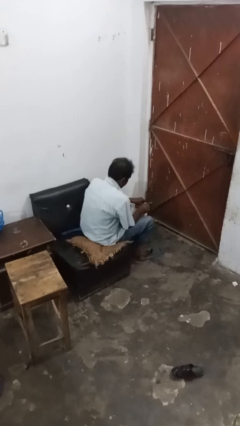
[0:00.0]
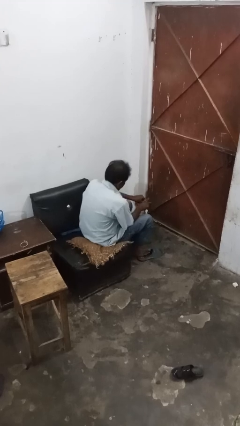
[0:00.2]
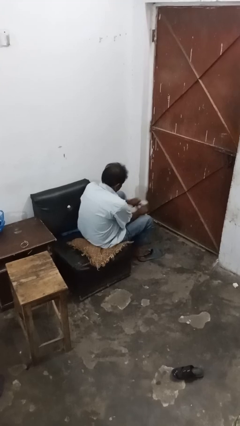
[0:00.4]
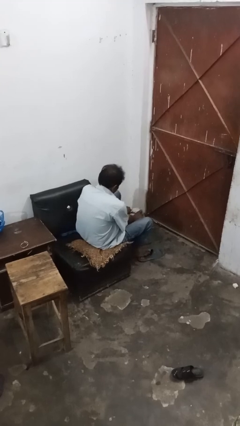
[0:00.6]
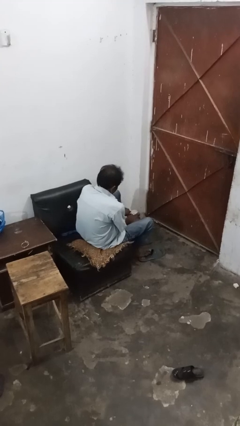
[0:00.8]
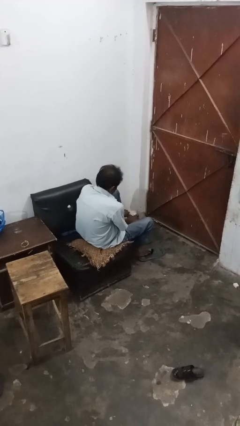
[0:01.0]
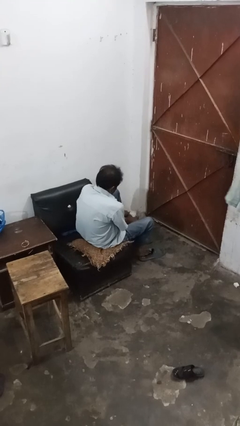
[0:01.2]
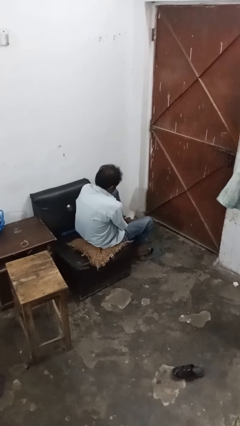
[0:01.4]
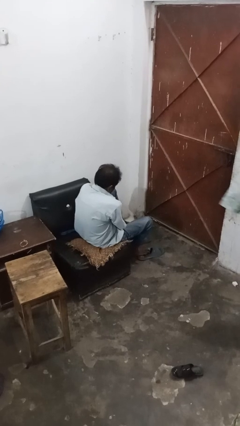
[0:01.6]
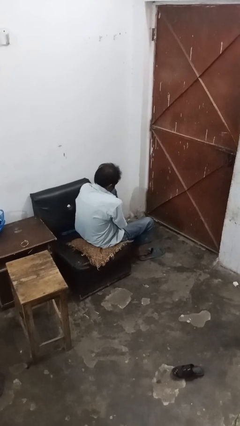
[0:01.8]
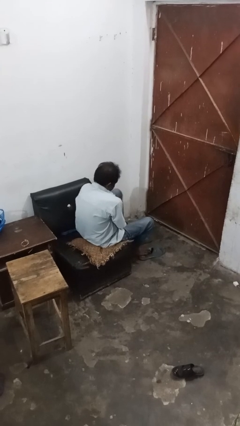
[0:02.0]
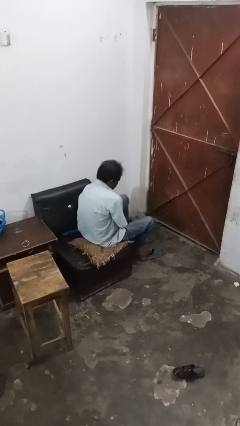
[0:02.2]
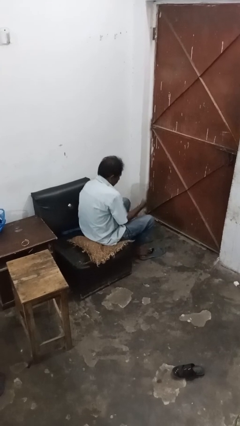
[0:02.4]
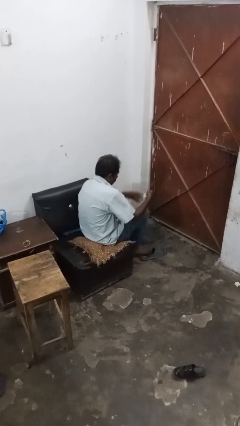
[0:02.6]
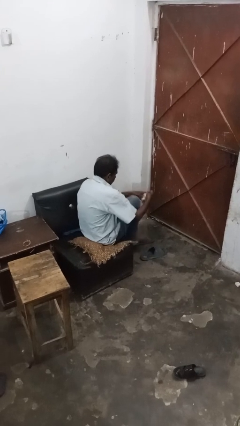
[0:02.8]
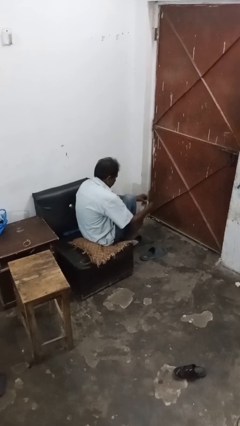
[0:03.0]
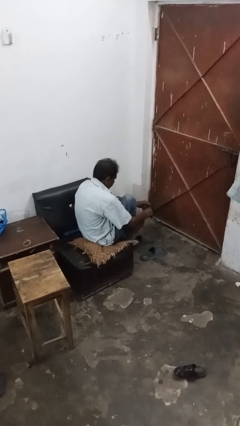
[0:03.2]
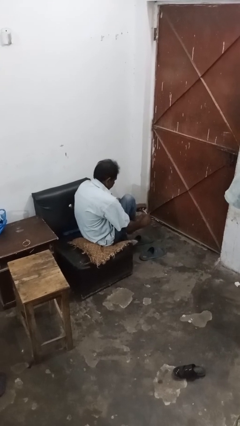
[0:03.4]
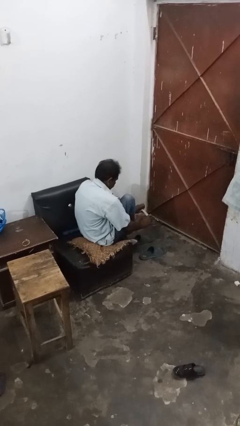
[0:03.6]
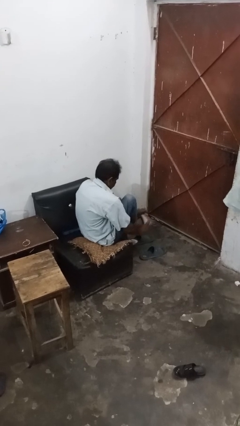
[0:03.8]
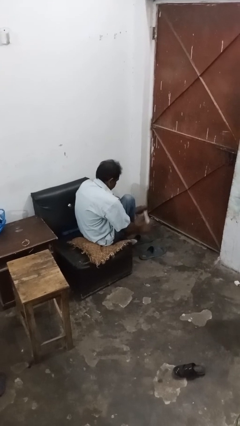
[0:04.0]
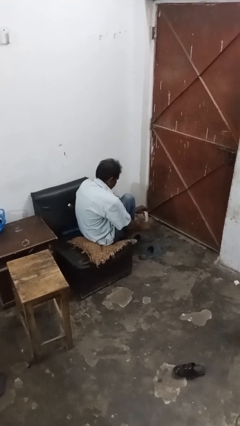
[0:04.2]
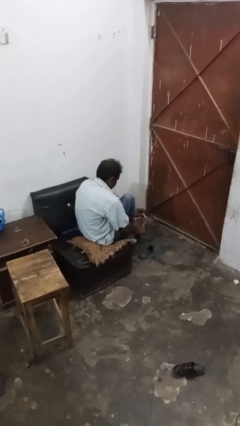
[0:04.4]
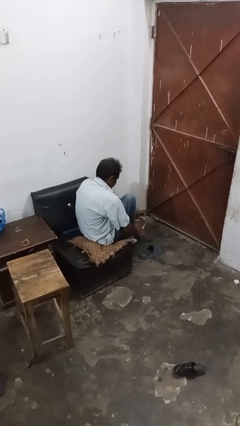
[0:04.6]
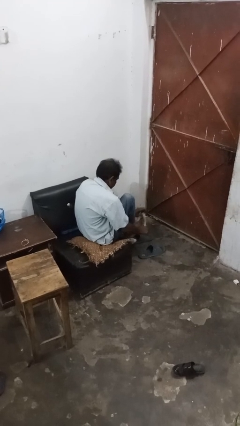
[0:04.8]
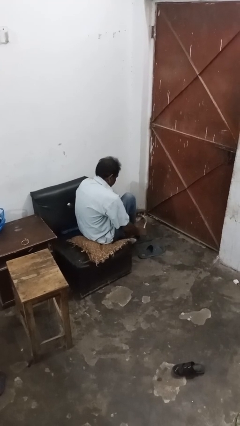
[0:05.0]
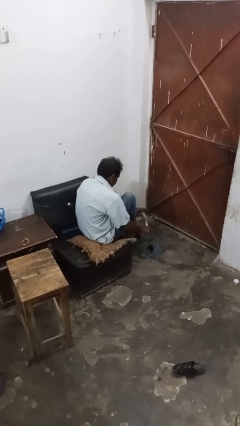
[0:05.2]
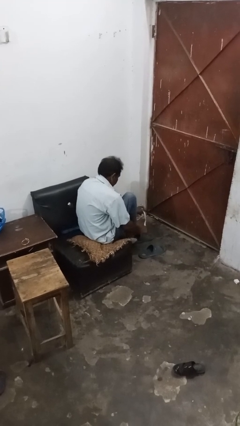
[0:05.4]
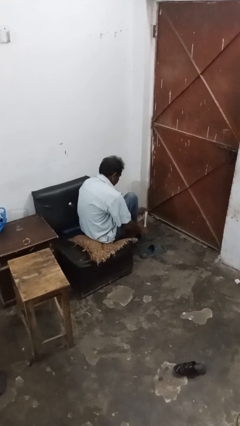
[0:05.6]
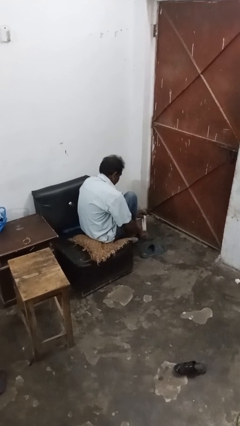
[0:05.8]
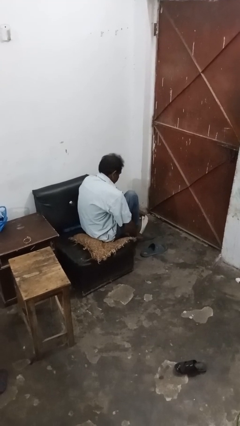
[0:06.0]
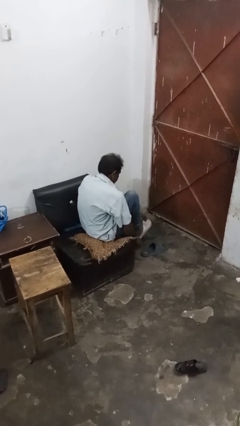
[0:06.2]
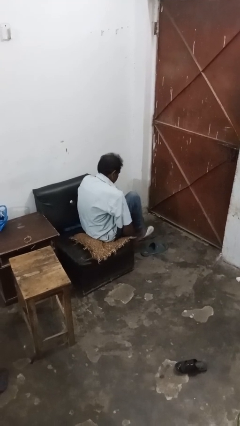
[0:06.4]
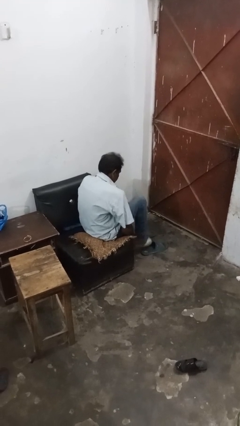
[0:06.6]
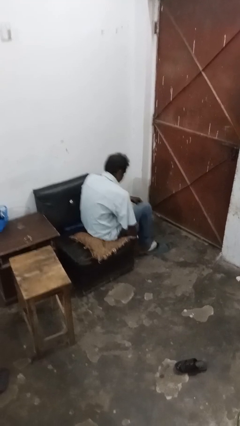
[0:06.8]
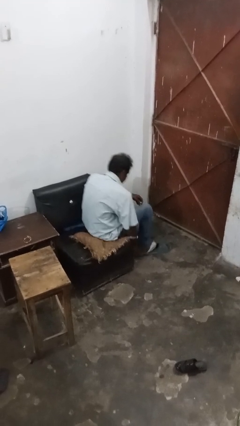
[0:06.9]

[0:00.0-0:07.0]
person puts on socks

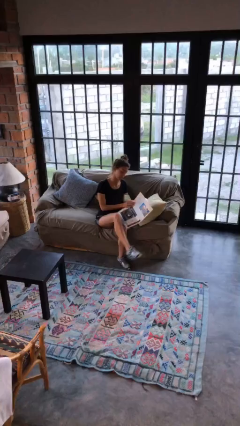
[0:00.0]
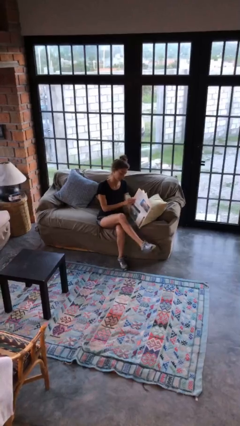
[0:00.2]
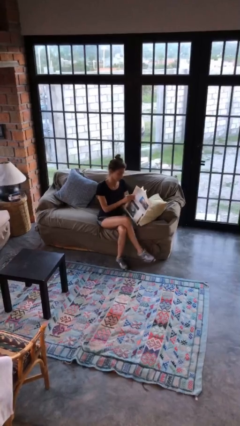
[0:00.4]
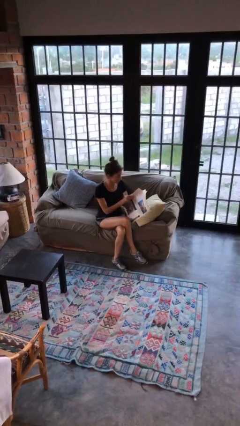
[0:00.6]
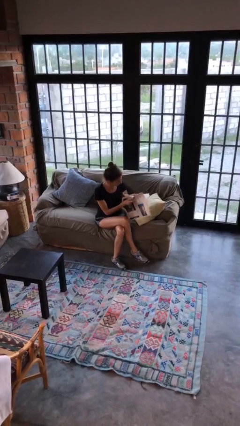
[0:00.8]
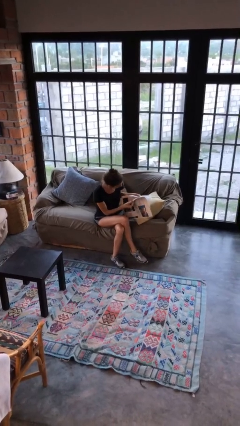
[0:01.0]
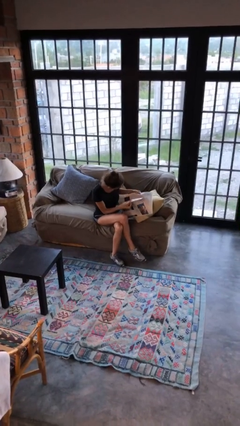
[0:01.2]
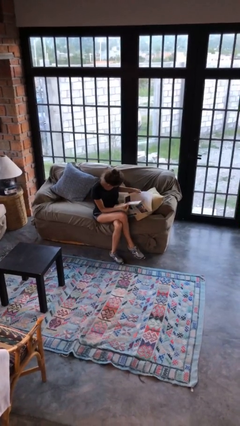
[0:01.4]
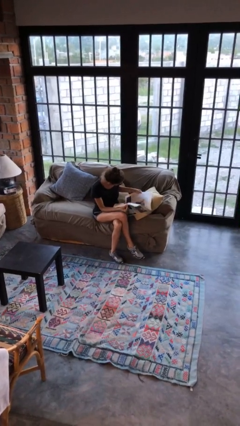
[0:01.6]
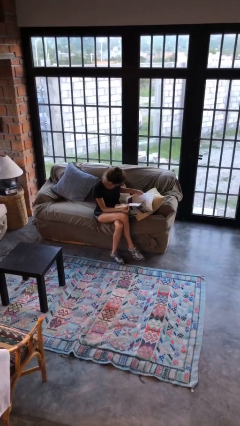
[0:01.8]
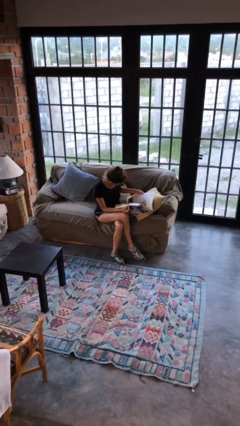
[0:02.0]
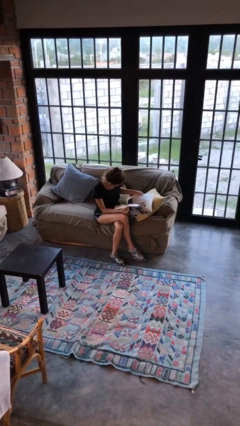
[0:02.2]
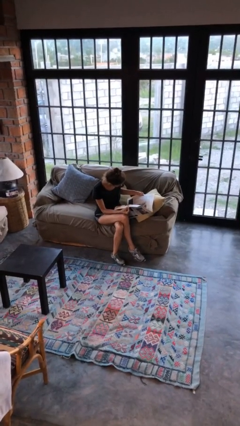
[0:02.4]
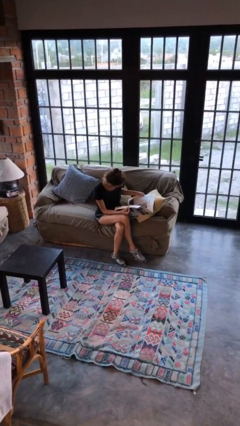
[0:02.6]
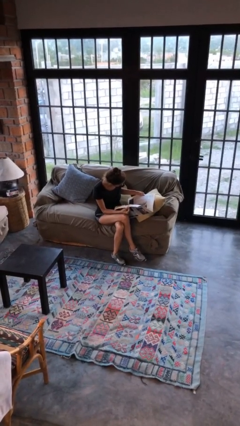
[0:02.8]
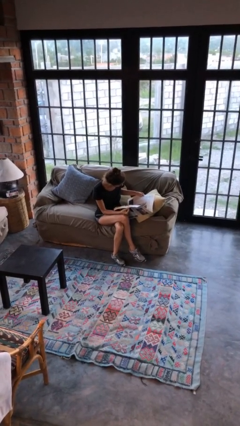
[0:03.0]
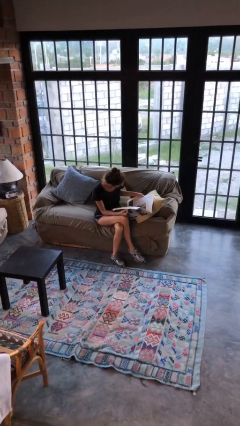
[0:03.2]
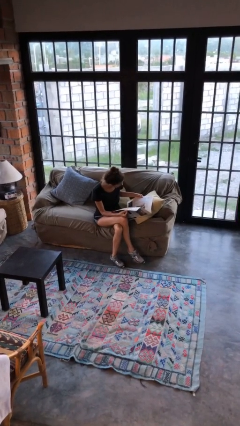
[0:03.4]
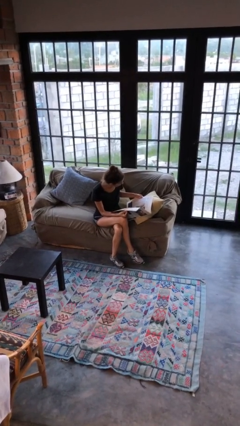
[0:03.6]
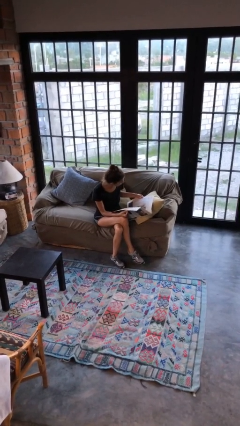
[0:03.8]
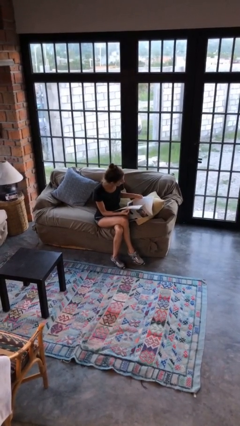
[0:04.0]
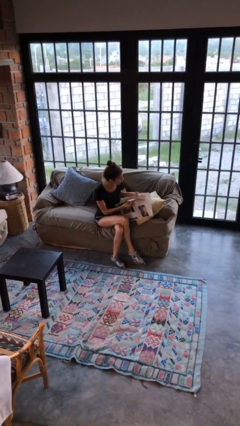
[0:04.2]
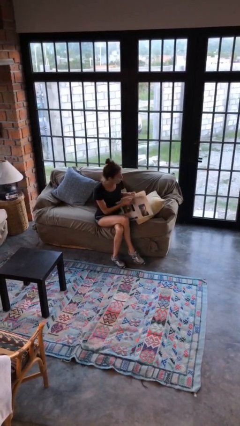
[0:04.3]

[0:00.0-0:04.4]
person reads newspaper

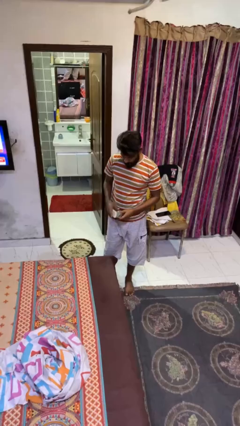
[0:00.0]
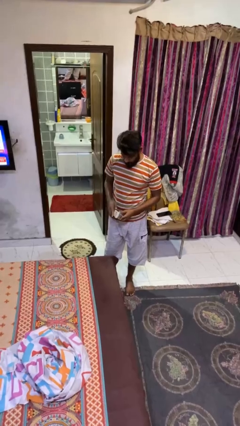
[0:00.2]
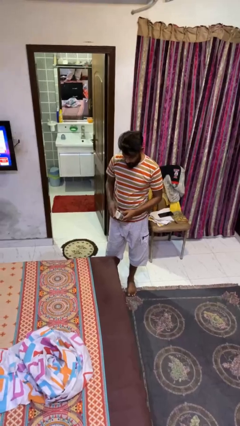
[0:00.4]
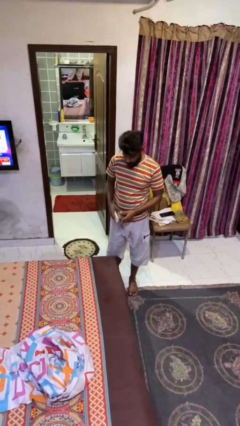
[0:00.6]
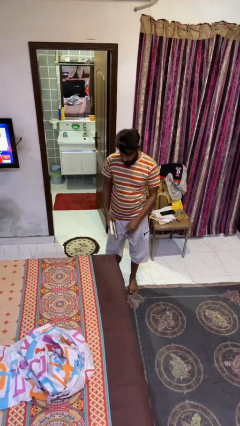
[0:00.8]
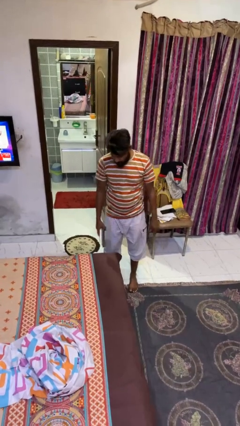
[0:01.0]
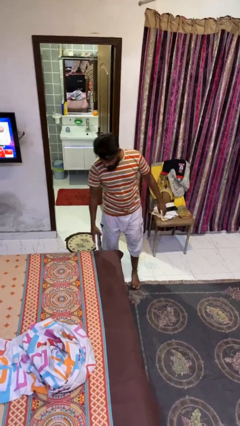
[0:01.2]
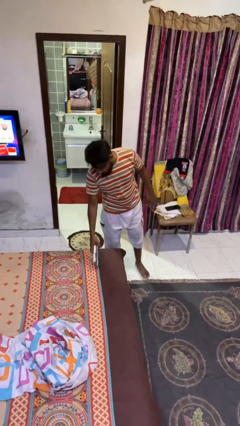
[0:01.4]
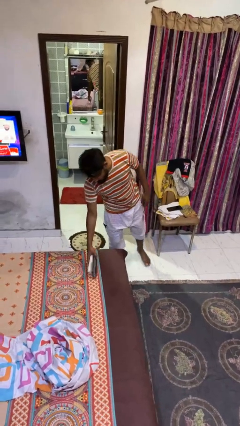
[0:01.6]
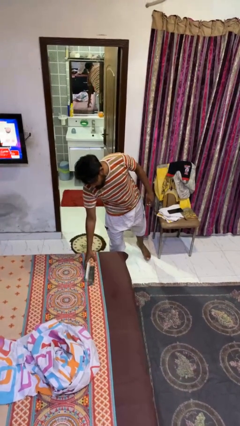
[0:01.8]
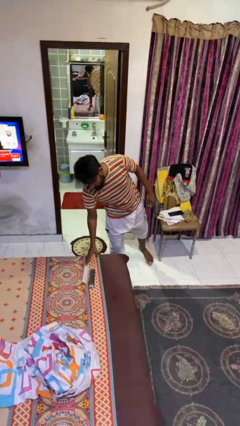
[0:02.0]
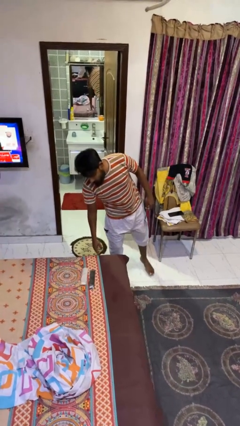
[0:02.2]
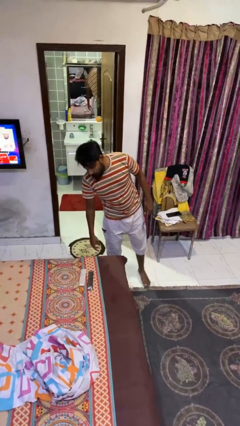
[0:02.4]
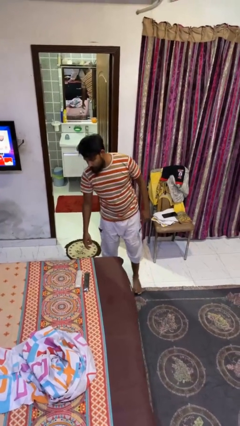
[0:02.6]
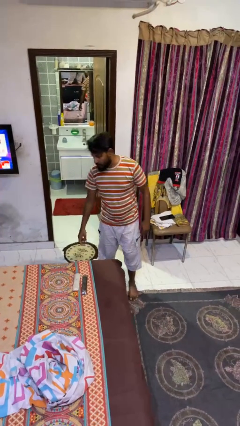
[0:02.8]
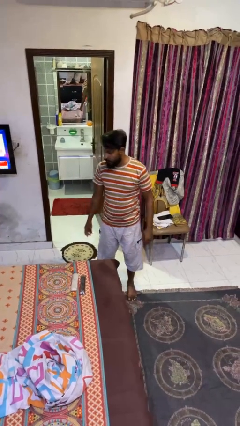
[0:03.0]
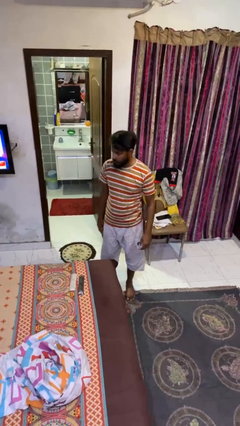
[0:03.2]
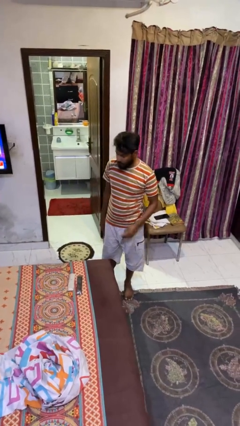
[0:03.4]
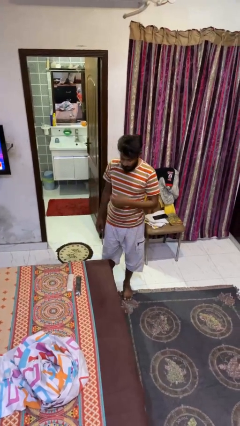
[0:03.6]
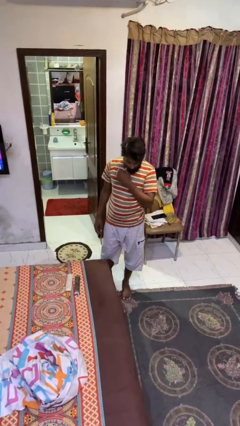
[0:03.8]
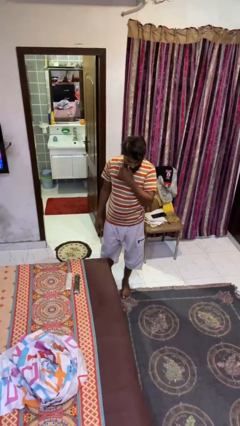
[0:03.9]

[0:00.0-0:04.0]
person puts down object on bed

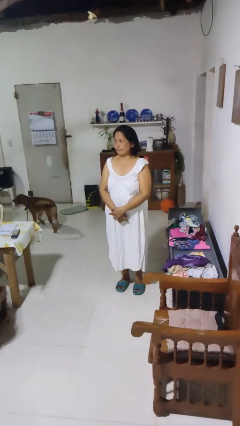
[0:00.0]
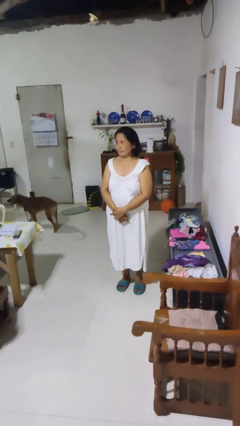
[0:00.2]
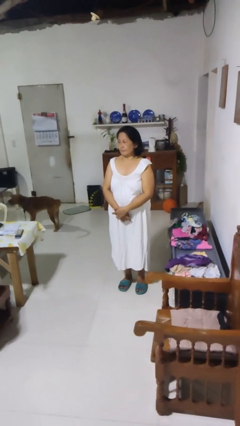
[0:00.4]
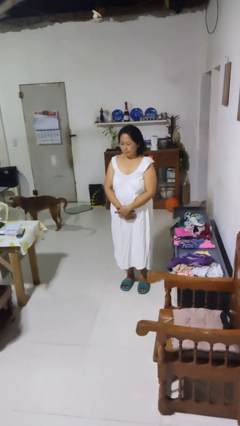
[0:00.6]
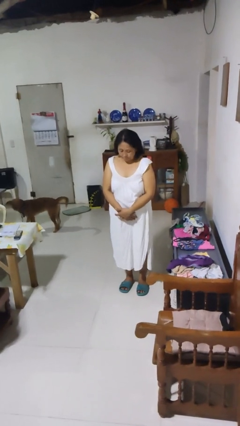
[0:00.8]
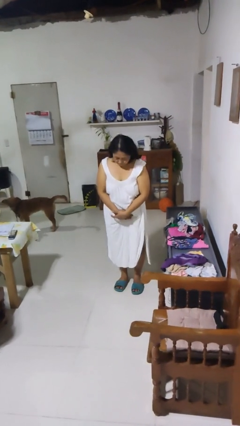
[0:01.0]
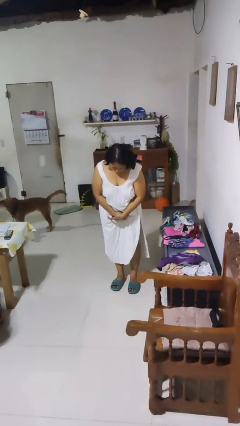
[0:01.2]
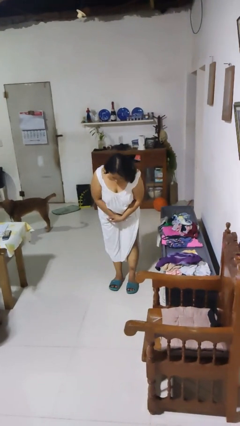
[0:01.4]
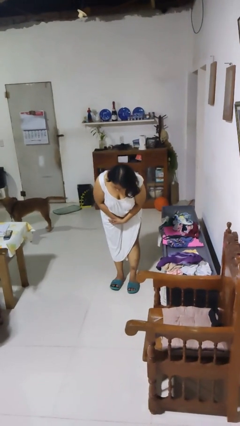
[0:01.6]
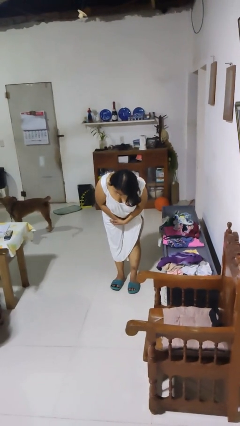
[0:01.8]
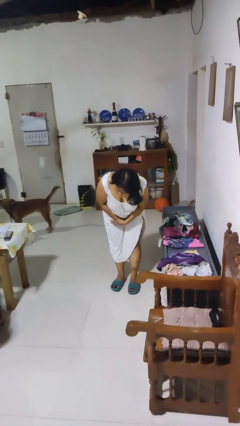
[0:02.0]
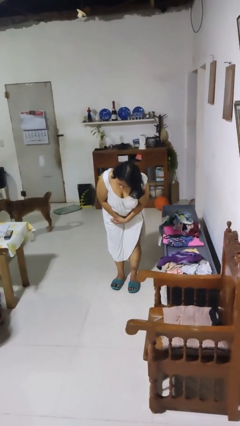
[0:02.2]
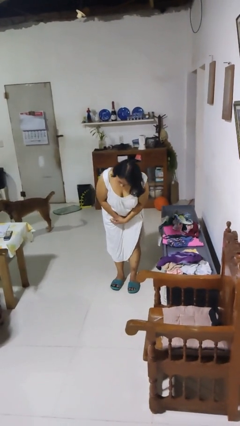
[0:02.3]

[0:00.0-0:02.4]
person bows
